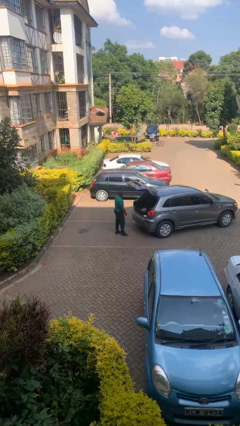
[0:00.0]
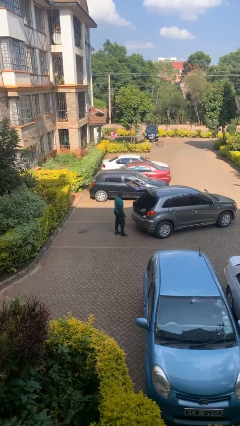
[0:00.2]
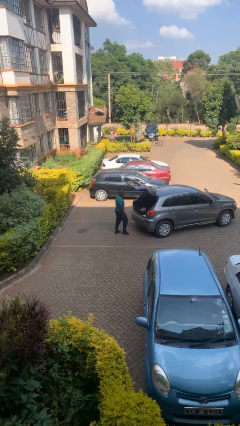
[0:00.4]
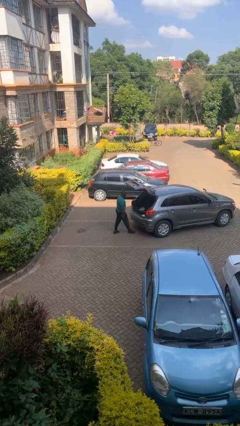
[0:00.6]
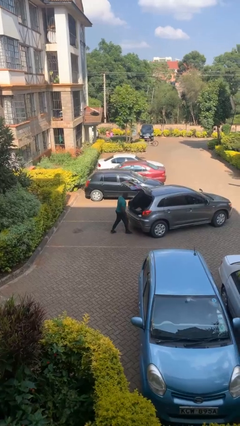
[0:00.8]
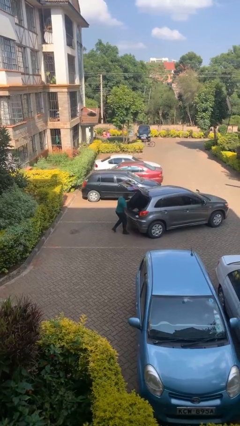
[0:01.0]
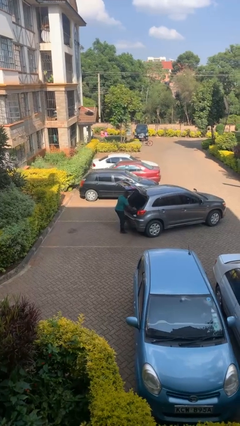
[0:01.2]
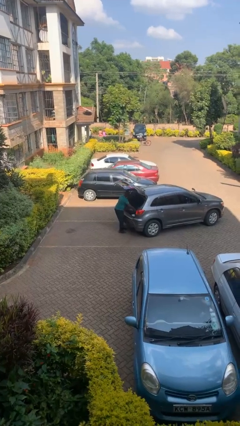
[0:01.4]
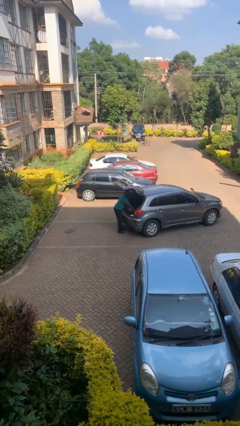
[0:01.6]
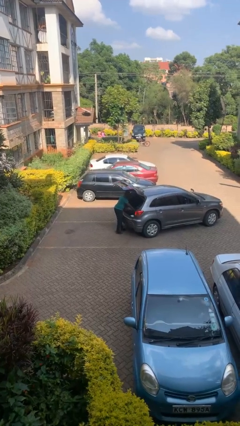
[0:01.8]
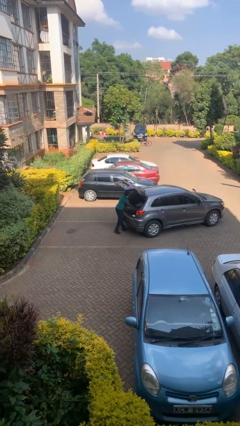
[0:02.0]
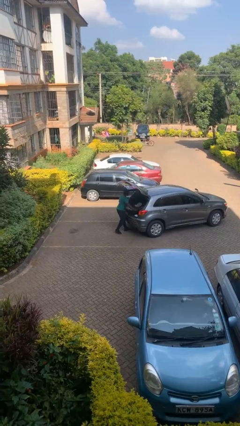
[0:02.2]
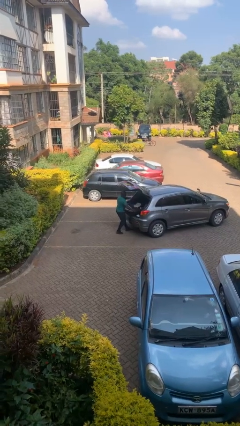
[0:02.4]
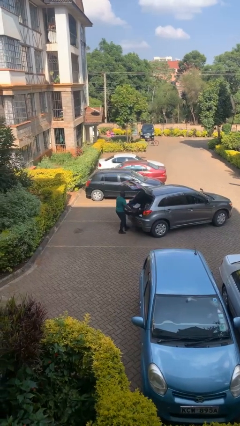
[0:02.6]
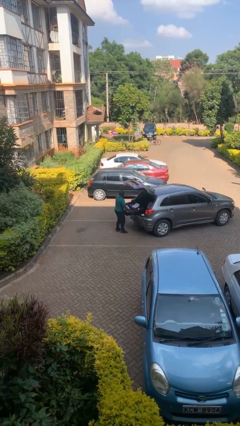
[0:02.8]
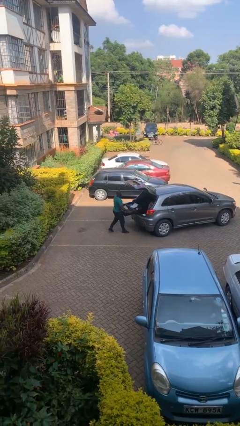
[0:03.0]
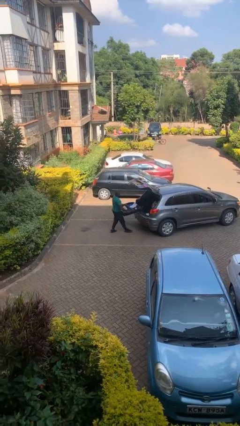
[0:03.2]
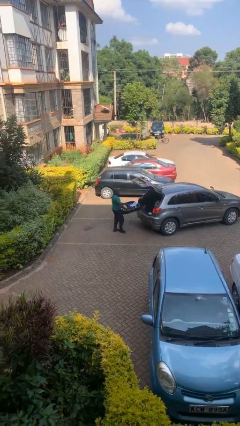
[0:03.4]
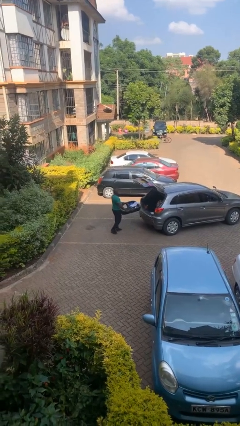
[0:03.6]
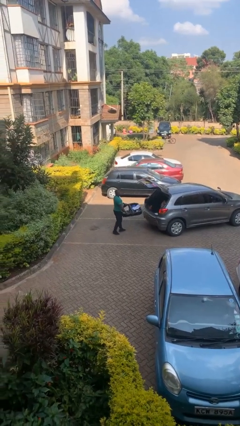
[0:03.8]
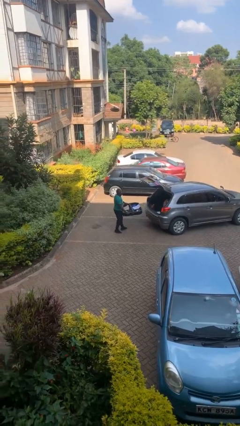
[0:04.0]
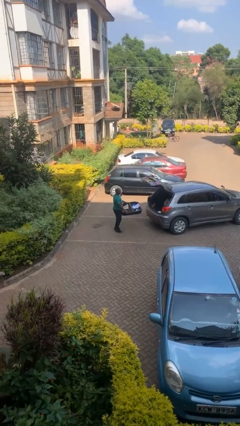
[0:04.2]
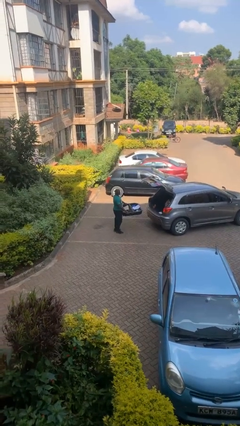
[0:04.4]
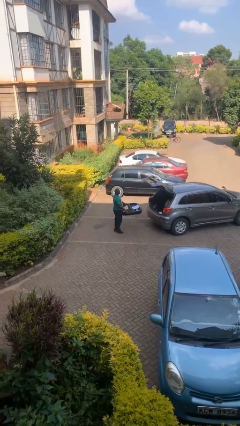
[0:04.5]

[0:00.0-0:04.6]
person unloads car

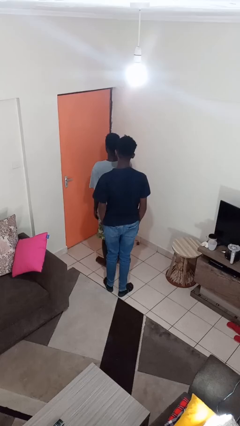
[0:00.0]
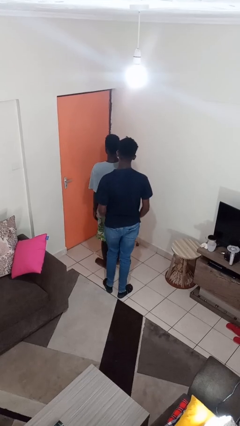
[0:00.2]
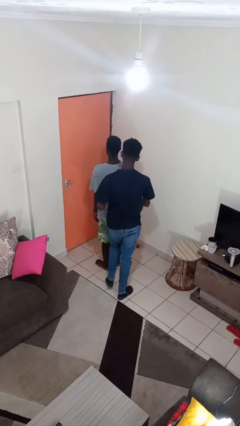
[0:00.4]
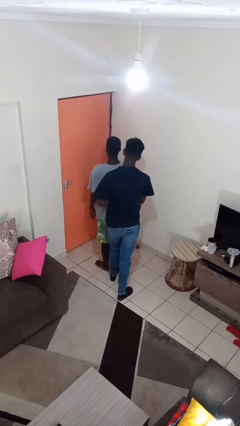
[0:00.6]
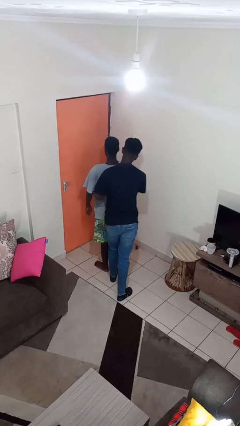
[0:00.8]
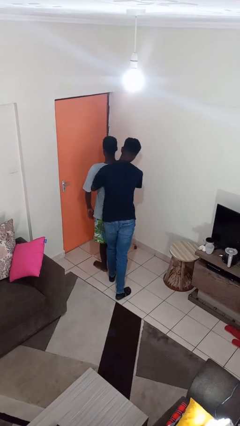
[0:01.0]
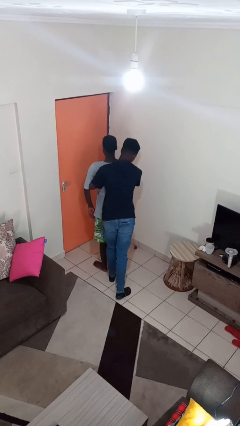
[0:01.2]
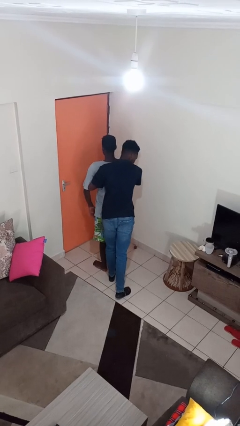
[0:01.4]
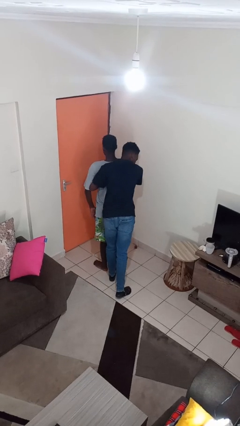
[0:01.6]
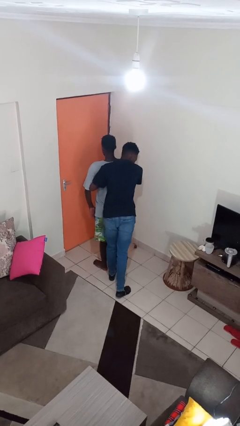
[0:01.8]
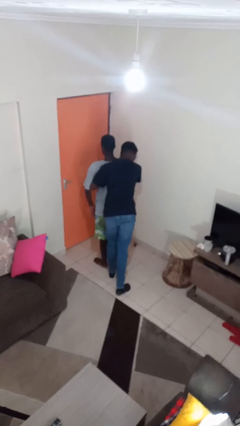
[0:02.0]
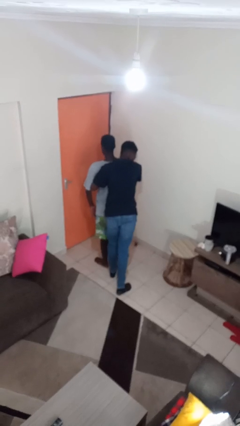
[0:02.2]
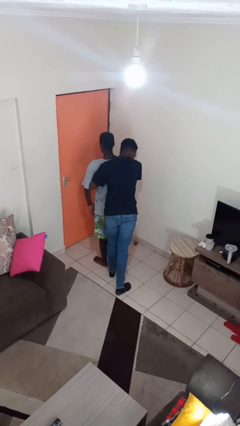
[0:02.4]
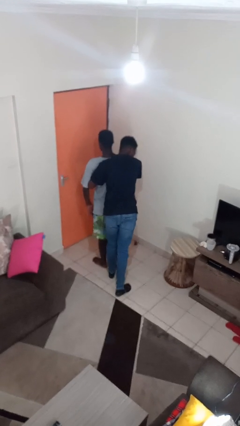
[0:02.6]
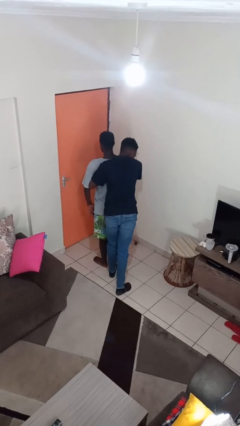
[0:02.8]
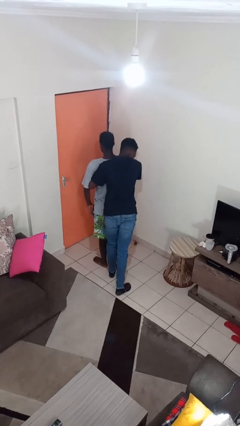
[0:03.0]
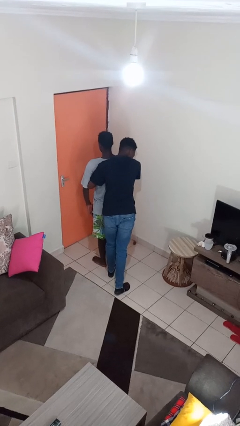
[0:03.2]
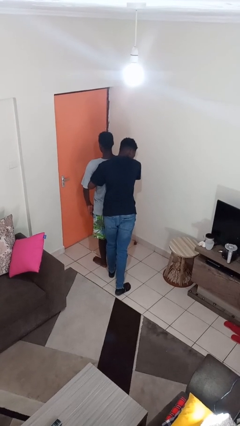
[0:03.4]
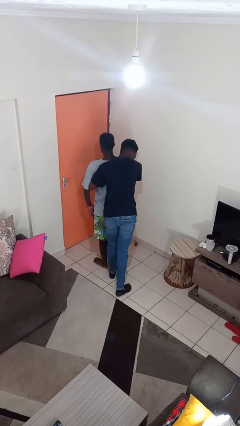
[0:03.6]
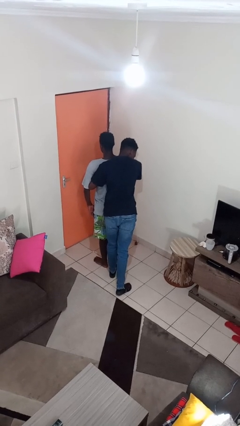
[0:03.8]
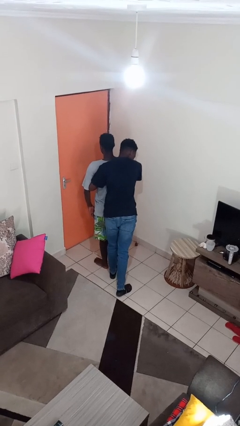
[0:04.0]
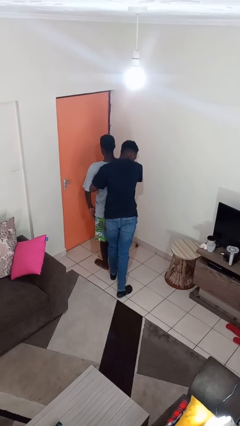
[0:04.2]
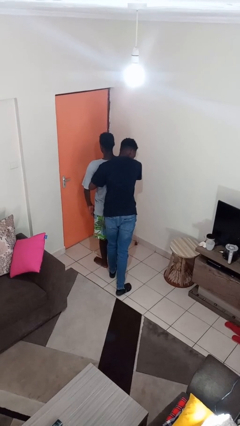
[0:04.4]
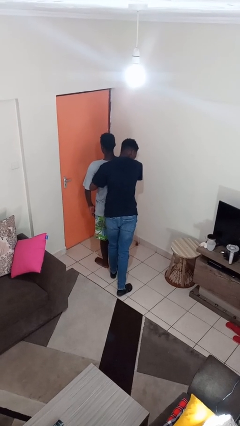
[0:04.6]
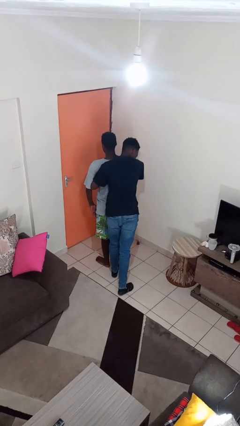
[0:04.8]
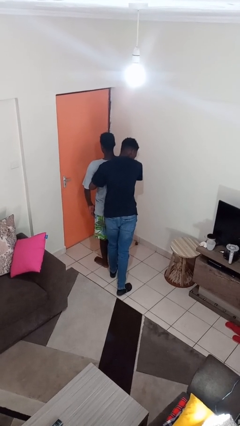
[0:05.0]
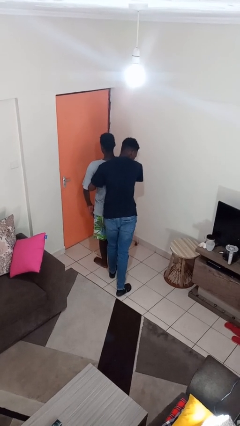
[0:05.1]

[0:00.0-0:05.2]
person hugs person from behind

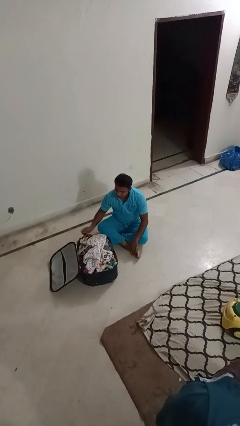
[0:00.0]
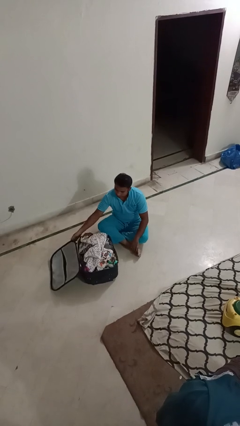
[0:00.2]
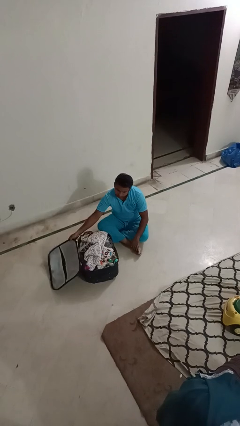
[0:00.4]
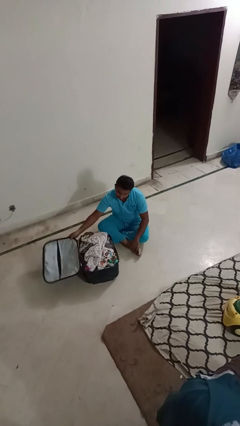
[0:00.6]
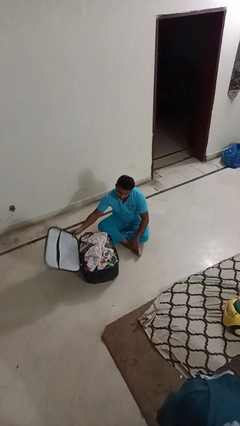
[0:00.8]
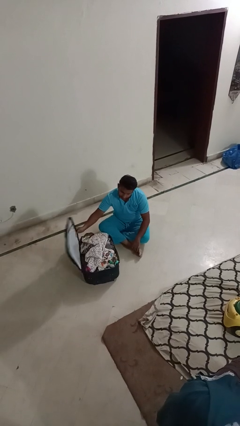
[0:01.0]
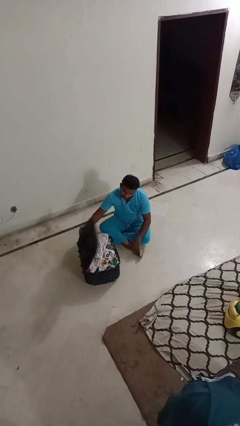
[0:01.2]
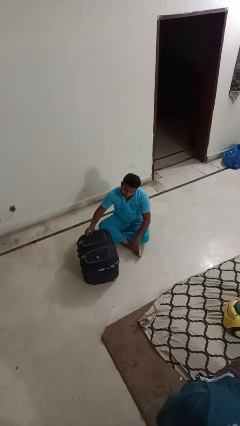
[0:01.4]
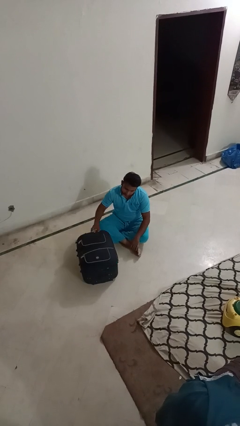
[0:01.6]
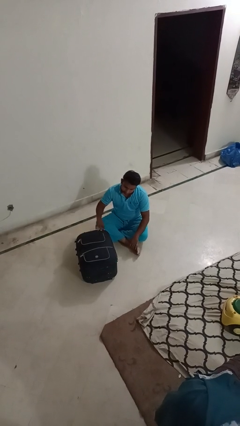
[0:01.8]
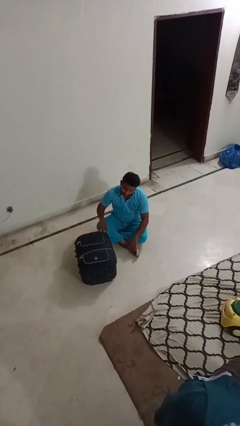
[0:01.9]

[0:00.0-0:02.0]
person closes suitcase

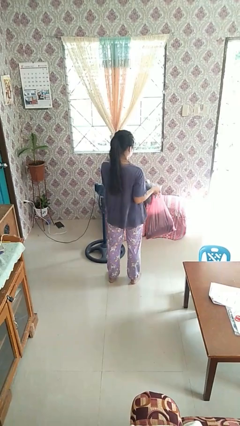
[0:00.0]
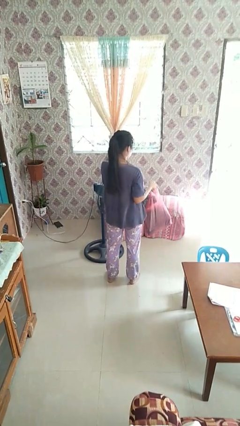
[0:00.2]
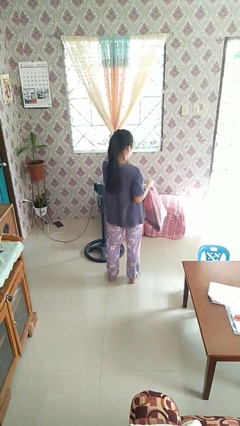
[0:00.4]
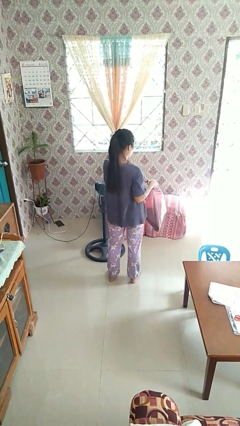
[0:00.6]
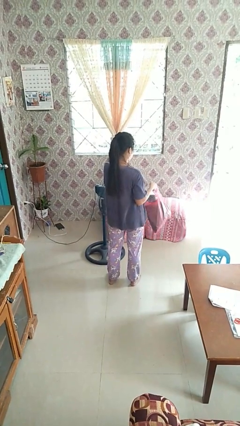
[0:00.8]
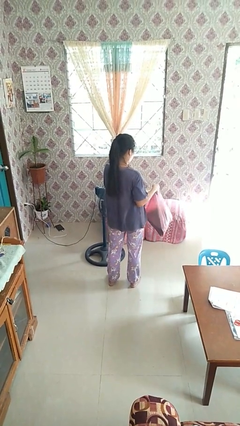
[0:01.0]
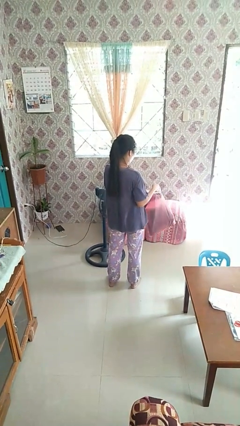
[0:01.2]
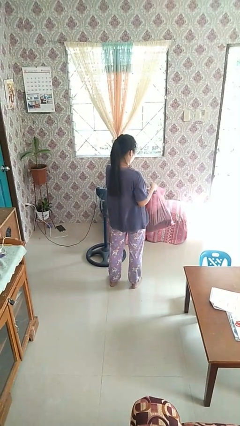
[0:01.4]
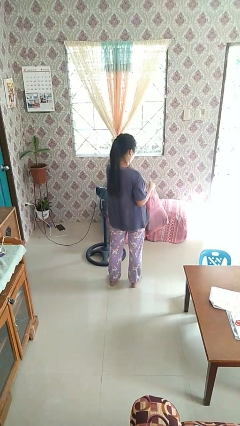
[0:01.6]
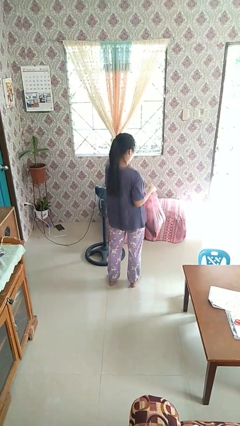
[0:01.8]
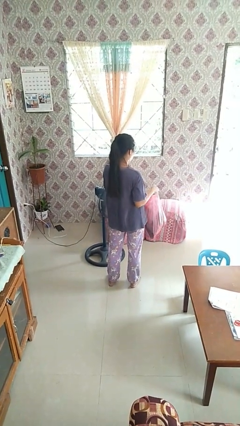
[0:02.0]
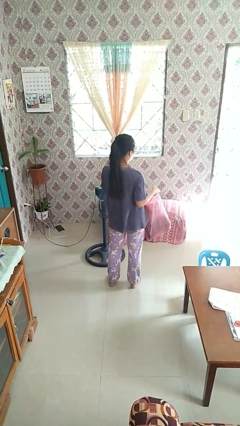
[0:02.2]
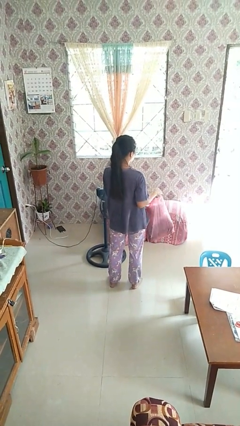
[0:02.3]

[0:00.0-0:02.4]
person puts object into bag

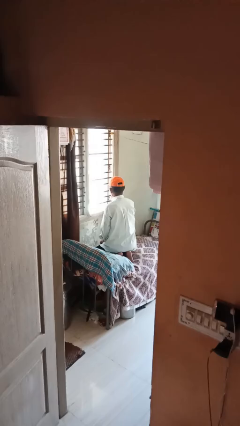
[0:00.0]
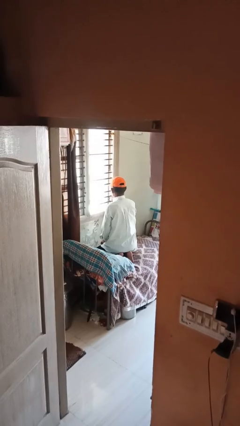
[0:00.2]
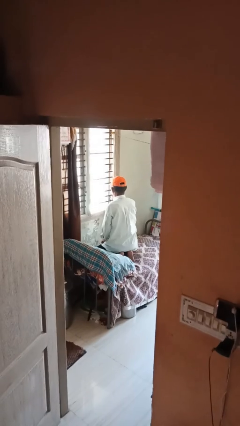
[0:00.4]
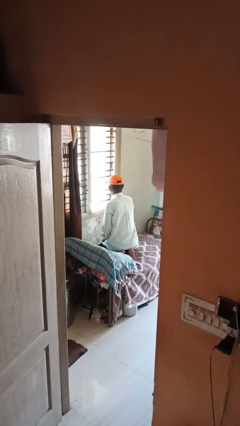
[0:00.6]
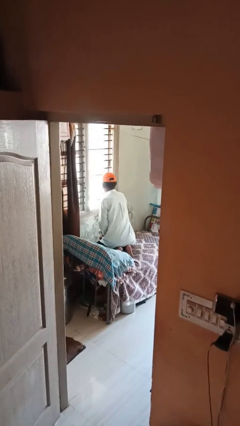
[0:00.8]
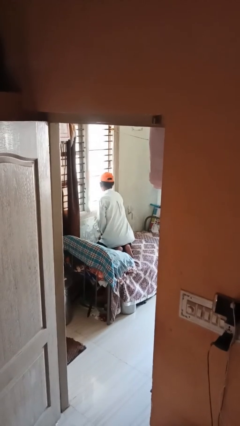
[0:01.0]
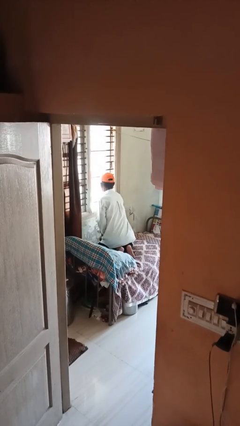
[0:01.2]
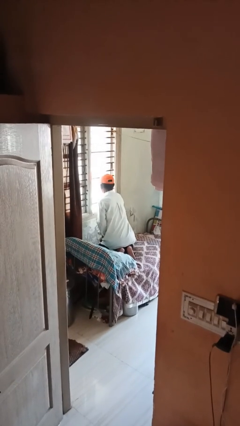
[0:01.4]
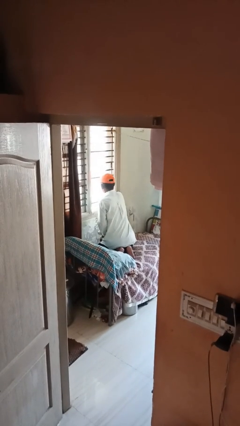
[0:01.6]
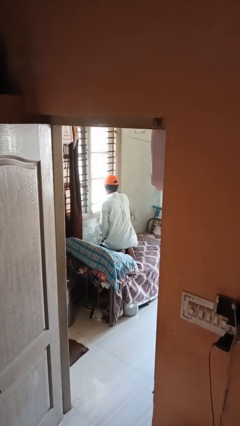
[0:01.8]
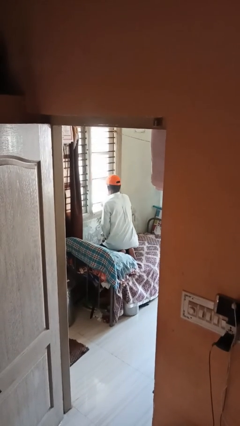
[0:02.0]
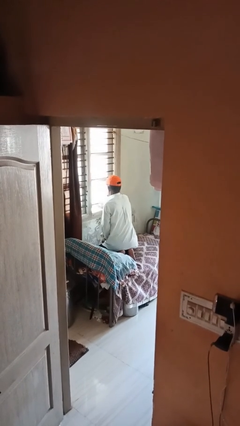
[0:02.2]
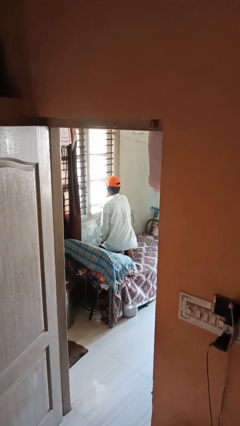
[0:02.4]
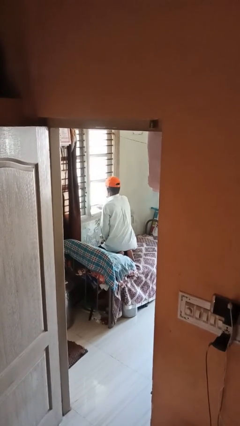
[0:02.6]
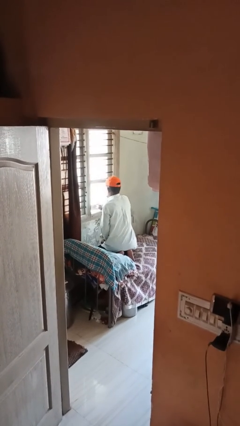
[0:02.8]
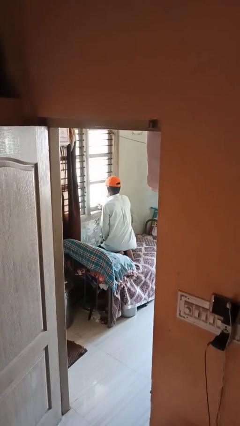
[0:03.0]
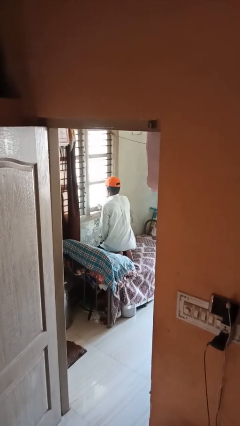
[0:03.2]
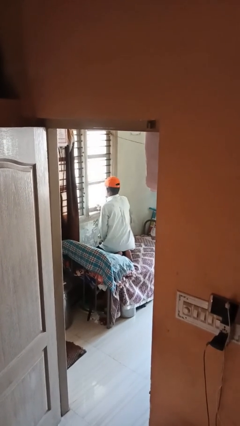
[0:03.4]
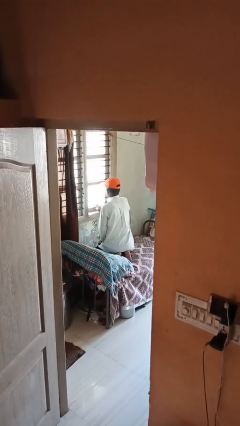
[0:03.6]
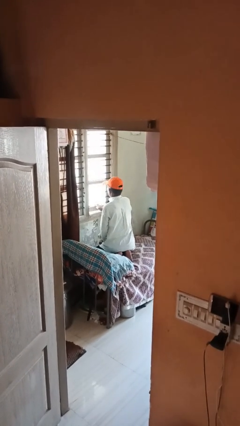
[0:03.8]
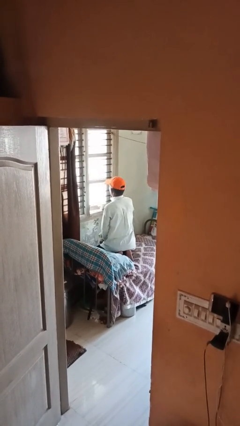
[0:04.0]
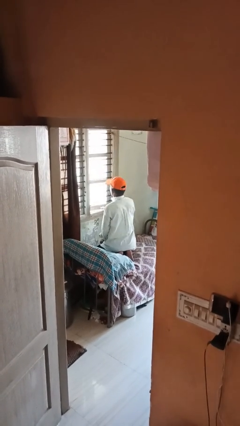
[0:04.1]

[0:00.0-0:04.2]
person closes home window
